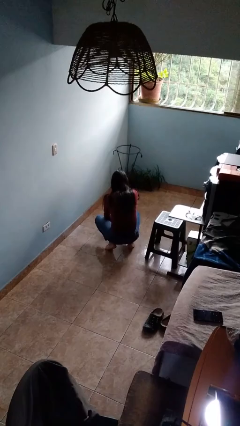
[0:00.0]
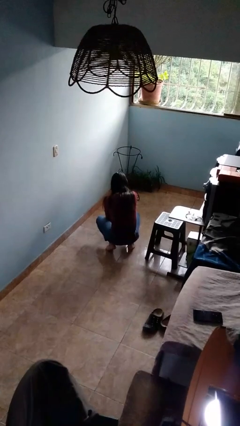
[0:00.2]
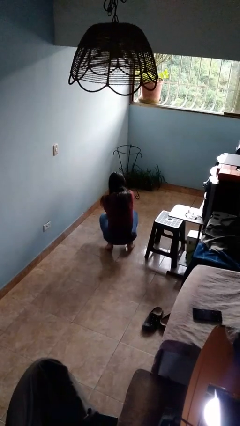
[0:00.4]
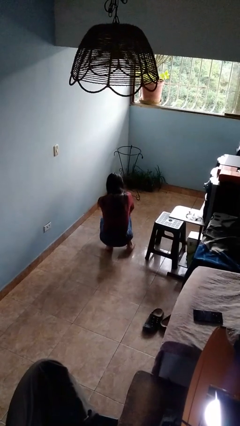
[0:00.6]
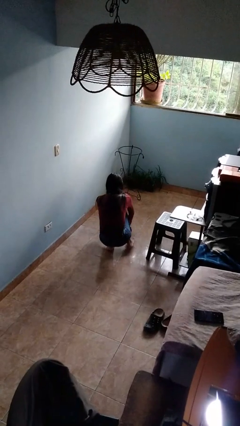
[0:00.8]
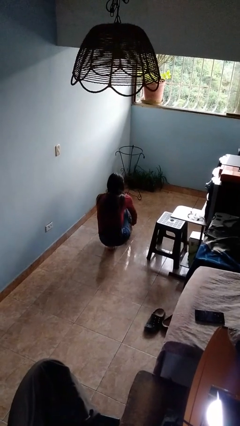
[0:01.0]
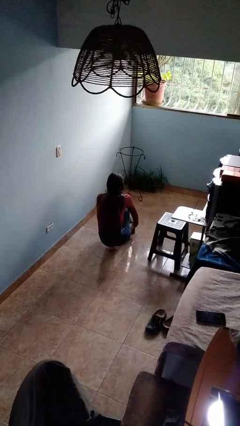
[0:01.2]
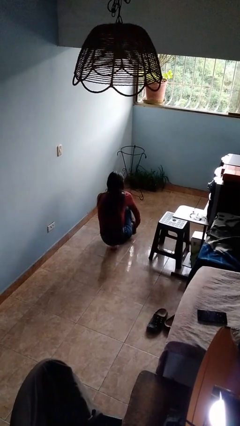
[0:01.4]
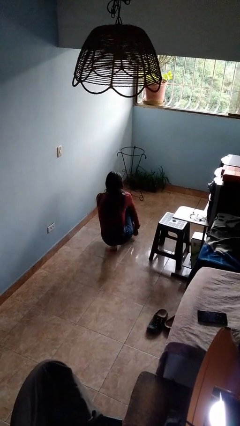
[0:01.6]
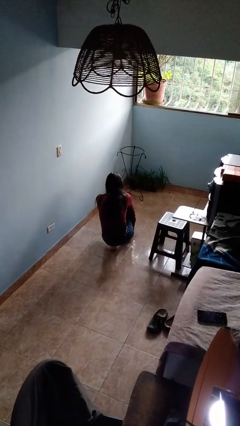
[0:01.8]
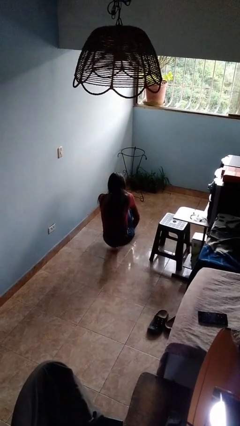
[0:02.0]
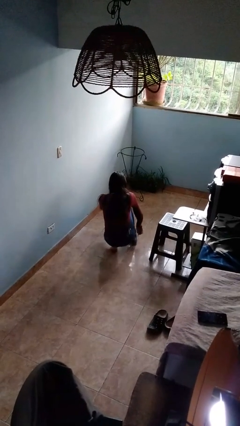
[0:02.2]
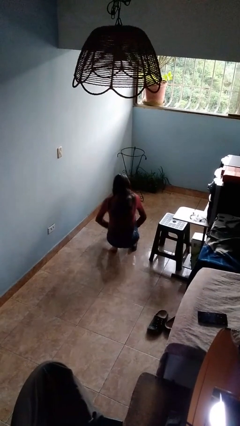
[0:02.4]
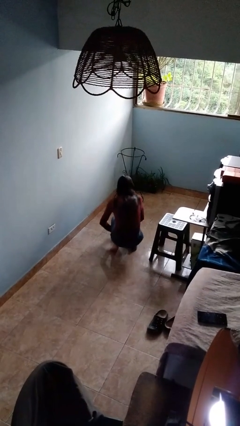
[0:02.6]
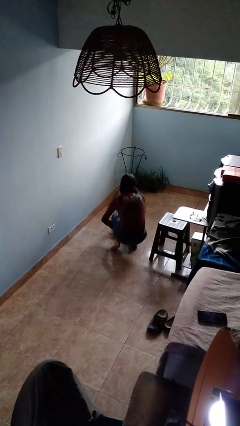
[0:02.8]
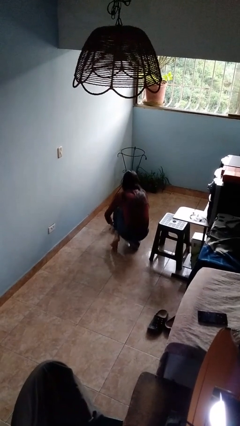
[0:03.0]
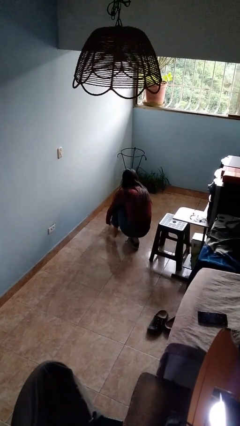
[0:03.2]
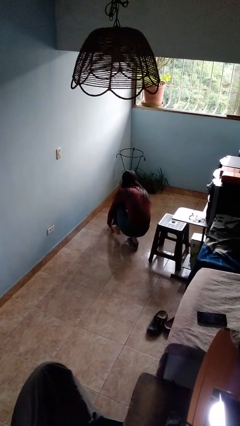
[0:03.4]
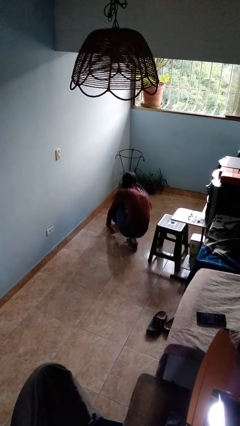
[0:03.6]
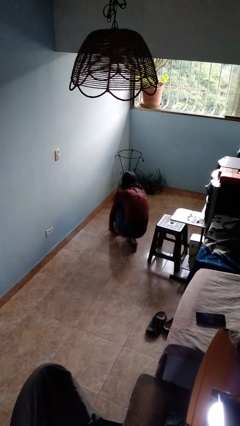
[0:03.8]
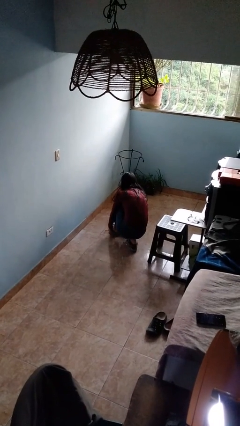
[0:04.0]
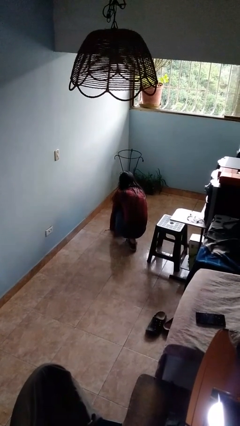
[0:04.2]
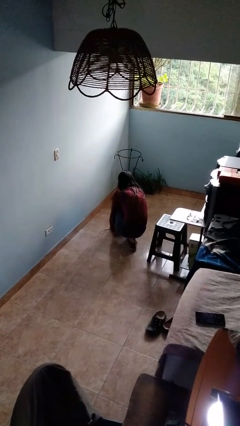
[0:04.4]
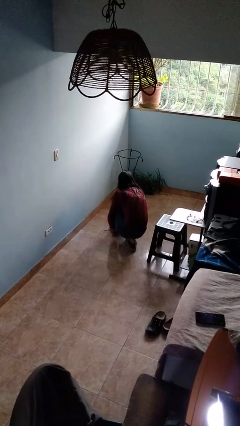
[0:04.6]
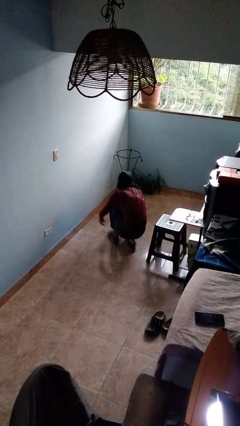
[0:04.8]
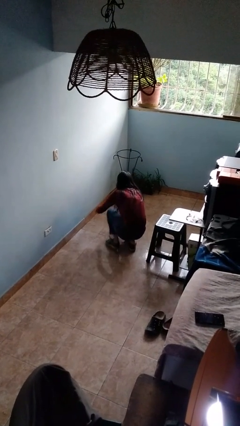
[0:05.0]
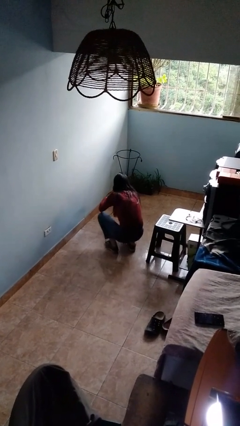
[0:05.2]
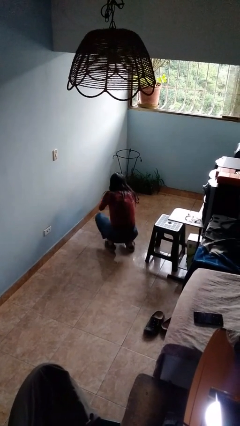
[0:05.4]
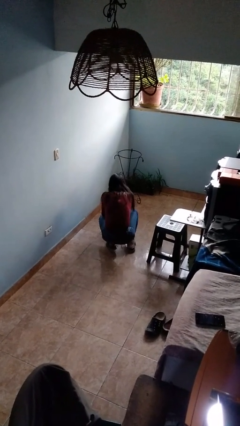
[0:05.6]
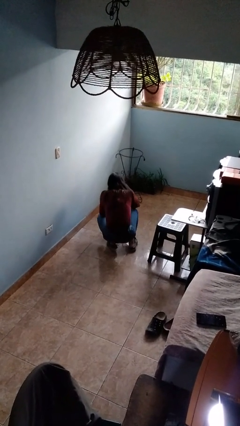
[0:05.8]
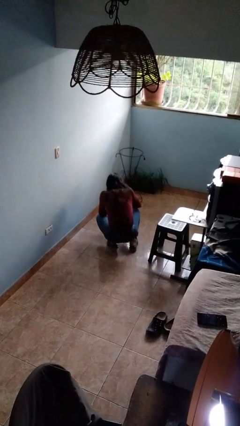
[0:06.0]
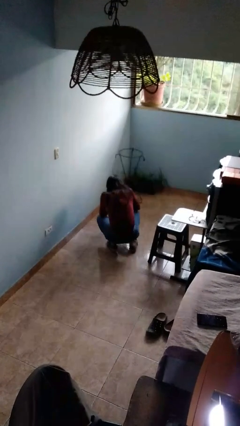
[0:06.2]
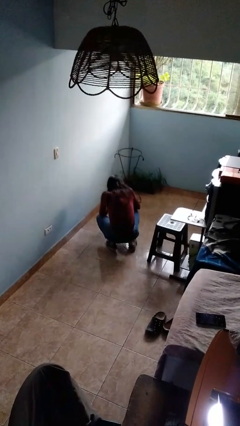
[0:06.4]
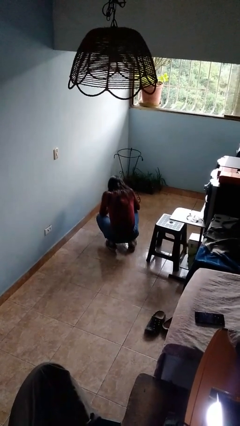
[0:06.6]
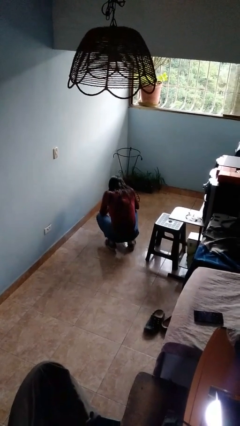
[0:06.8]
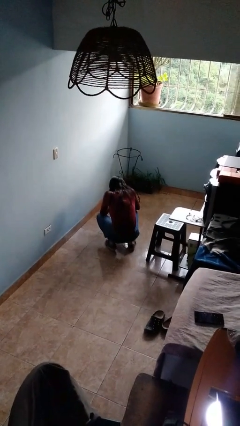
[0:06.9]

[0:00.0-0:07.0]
person puts on shoes

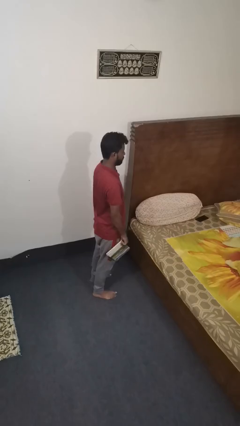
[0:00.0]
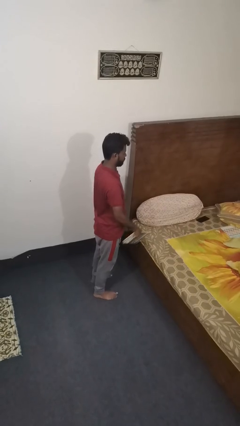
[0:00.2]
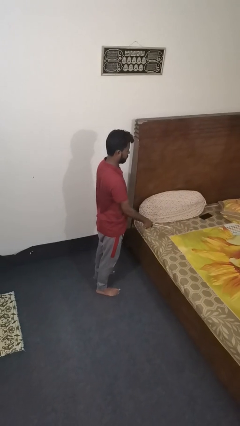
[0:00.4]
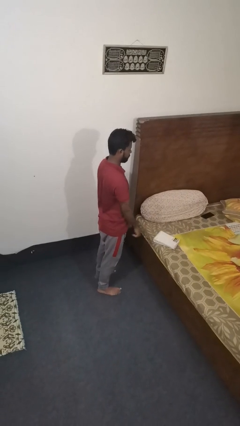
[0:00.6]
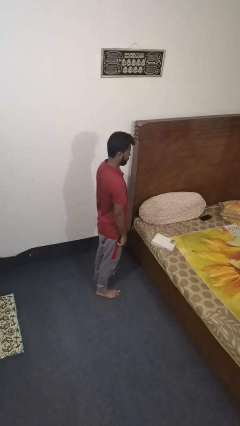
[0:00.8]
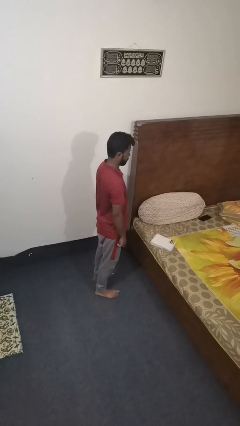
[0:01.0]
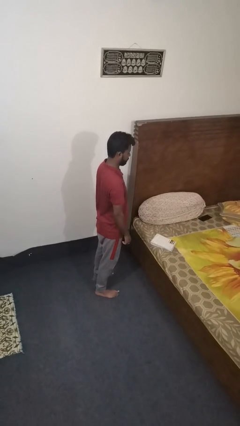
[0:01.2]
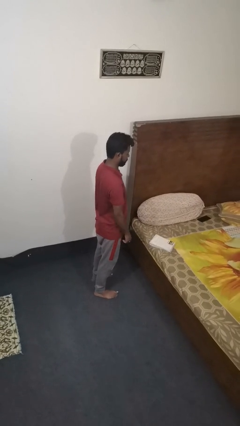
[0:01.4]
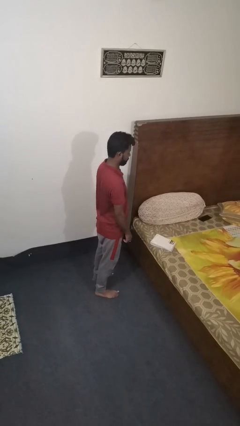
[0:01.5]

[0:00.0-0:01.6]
person throws object on bed

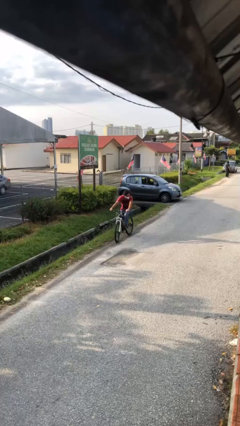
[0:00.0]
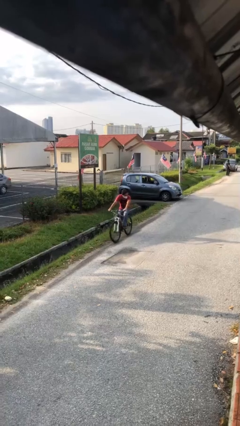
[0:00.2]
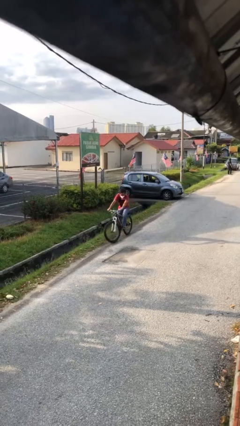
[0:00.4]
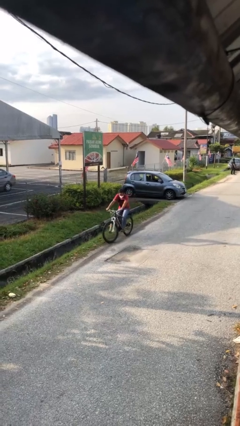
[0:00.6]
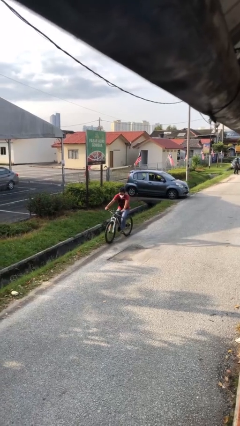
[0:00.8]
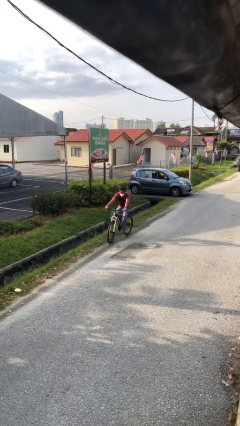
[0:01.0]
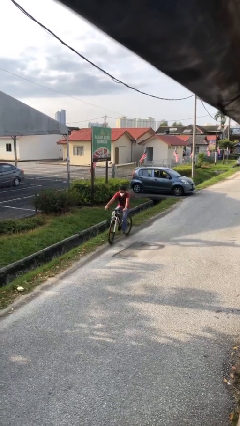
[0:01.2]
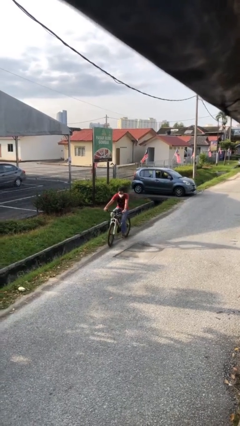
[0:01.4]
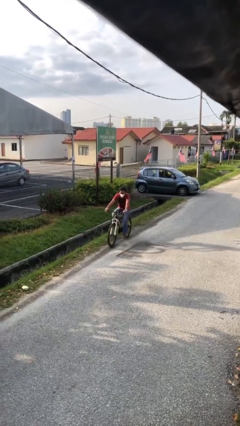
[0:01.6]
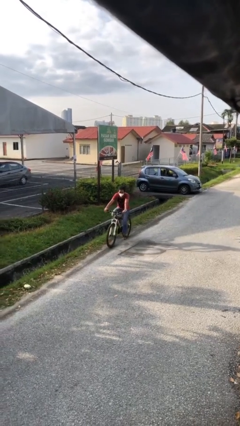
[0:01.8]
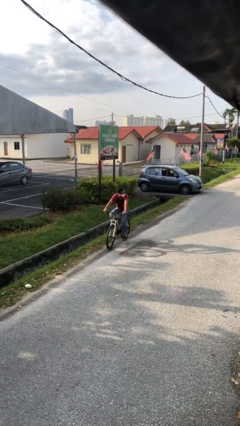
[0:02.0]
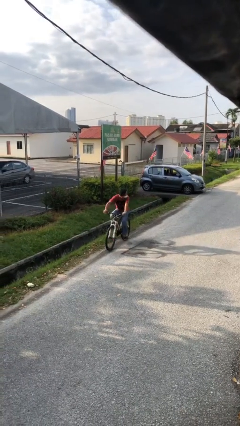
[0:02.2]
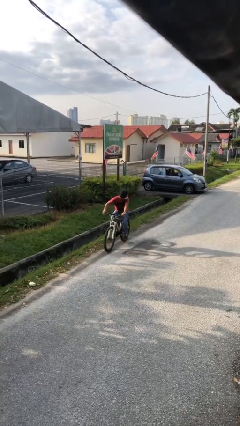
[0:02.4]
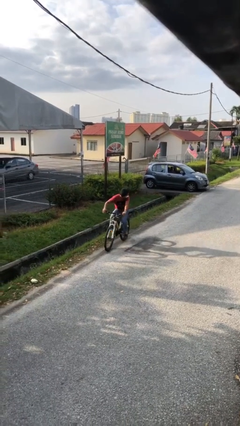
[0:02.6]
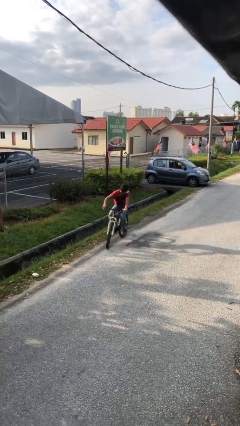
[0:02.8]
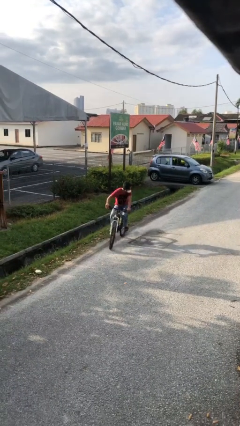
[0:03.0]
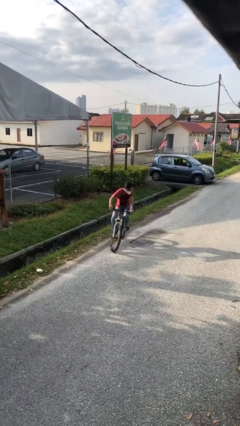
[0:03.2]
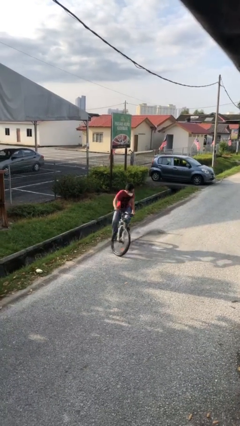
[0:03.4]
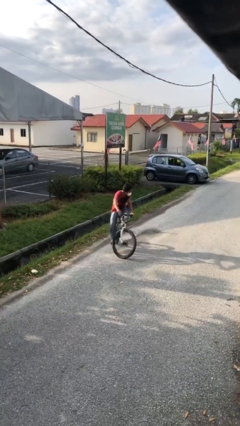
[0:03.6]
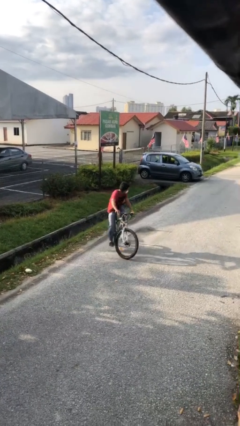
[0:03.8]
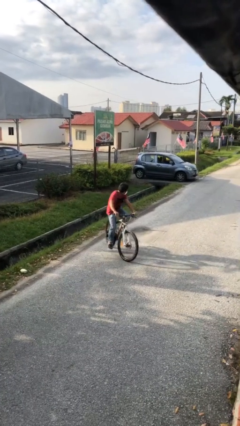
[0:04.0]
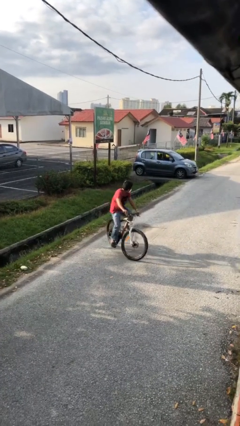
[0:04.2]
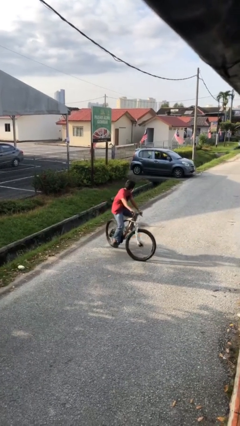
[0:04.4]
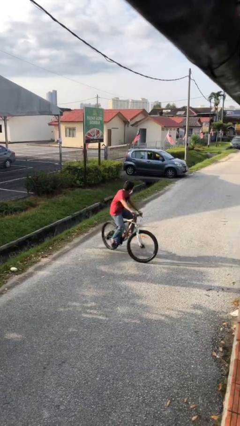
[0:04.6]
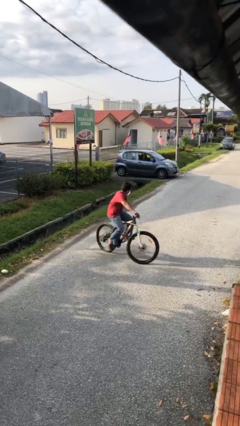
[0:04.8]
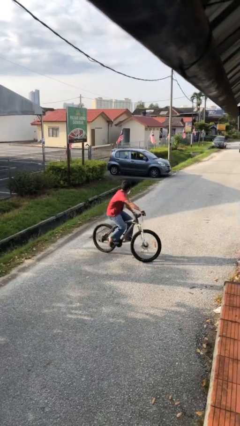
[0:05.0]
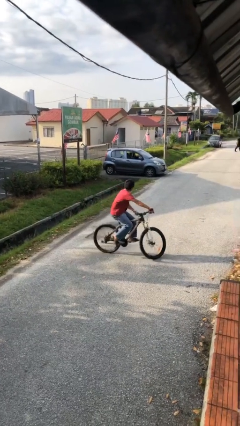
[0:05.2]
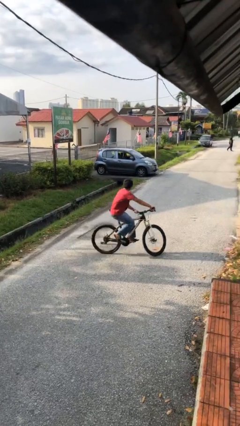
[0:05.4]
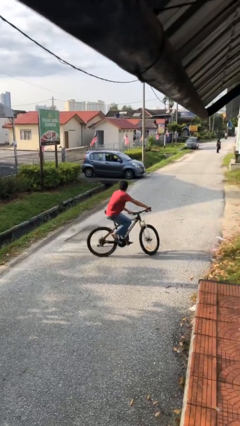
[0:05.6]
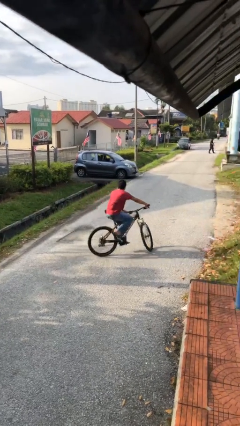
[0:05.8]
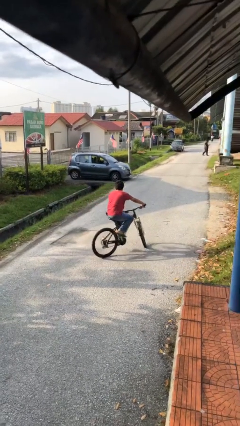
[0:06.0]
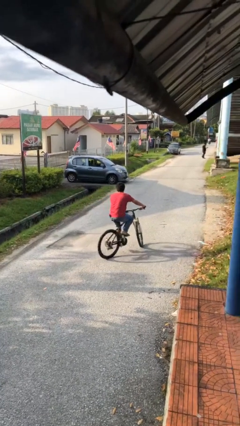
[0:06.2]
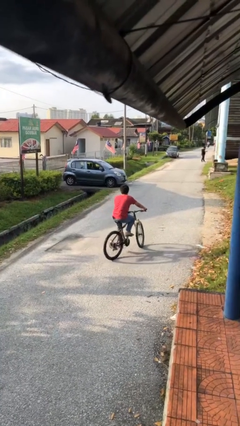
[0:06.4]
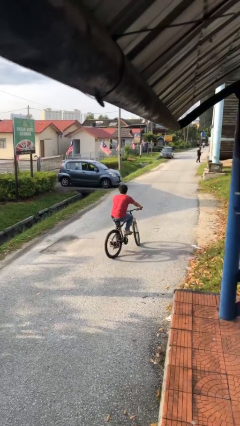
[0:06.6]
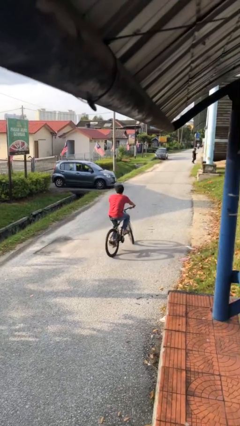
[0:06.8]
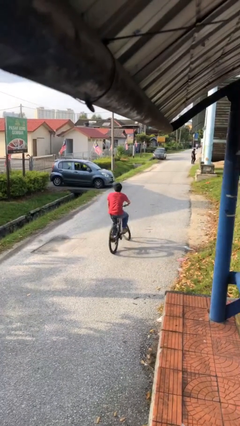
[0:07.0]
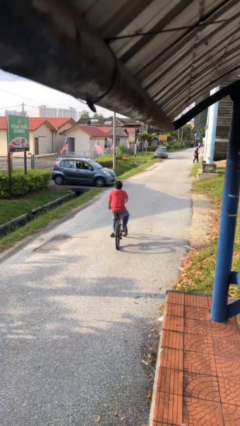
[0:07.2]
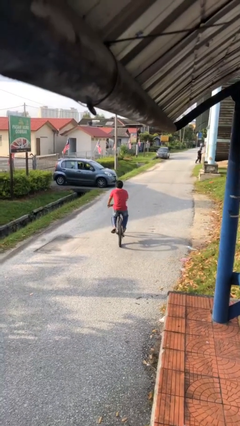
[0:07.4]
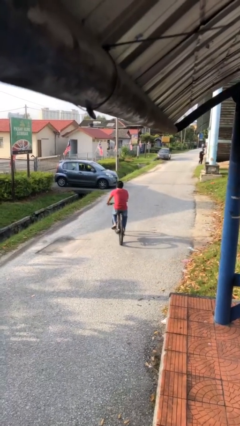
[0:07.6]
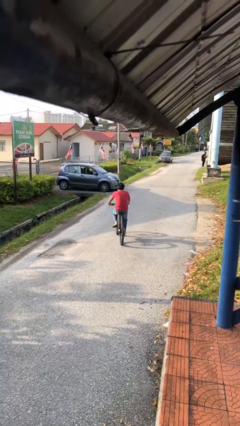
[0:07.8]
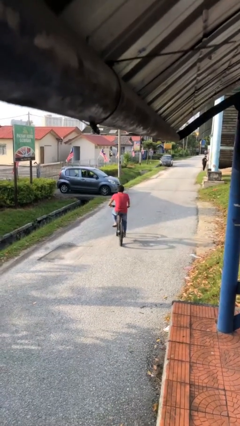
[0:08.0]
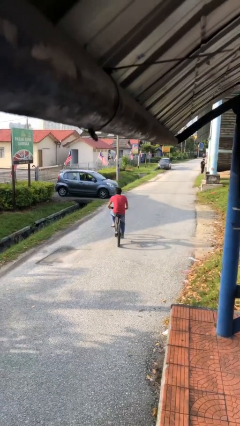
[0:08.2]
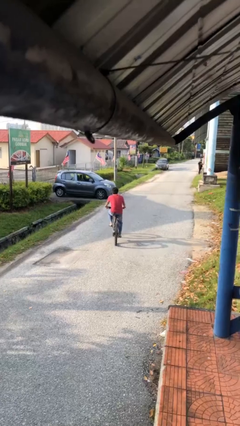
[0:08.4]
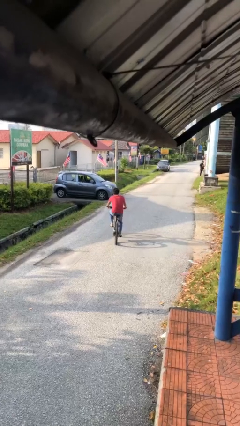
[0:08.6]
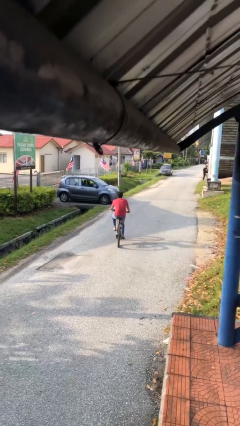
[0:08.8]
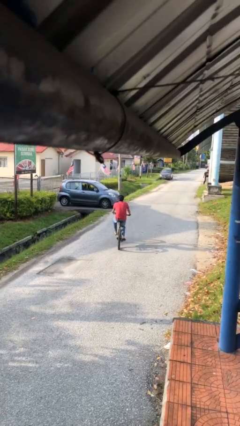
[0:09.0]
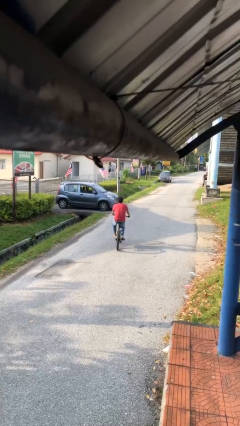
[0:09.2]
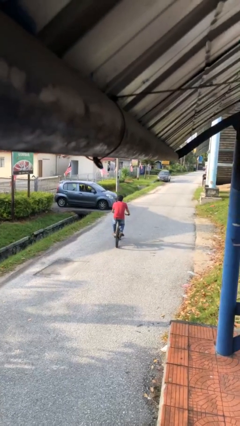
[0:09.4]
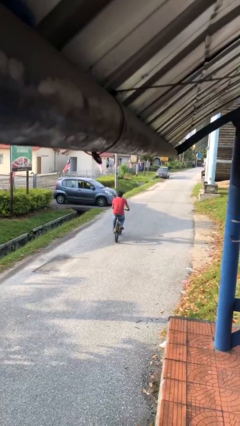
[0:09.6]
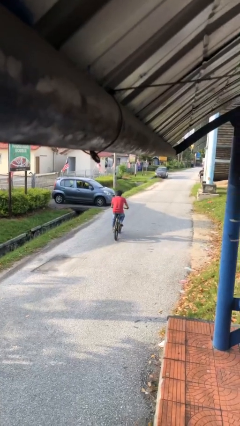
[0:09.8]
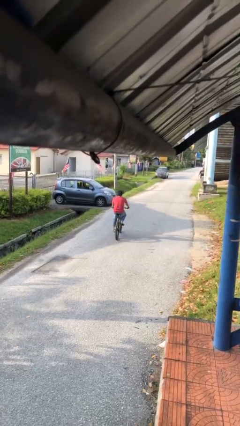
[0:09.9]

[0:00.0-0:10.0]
person rides bicycle
